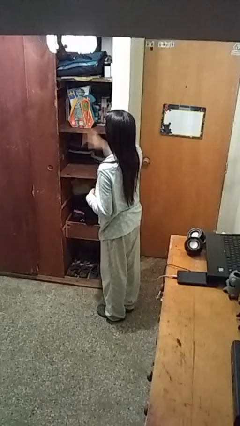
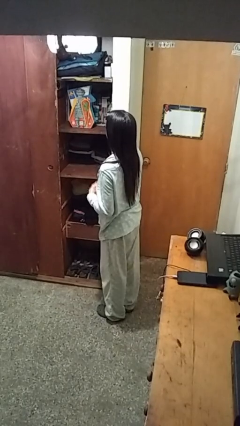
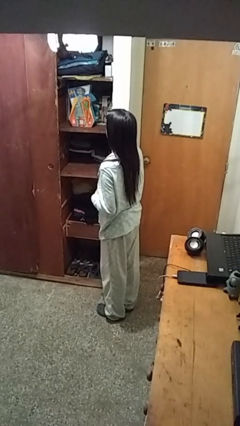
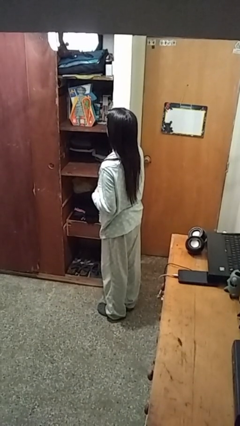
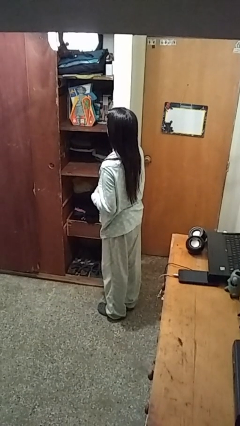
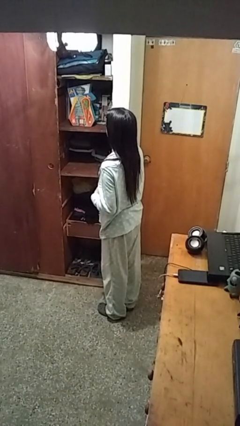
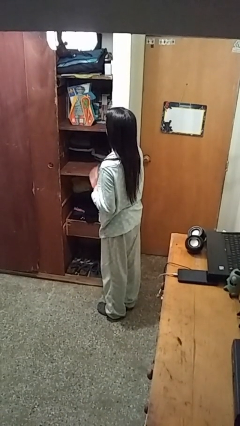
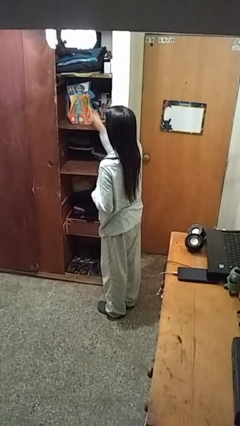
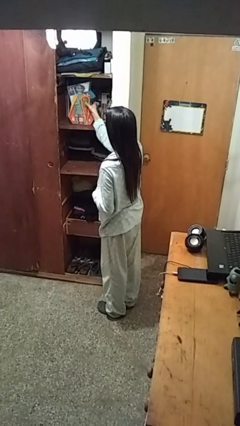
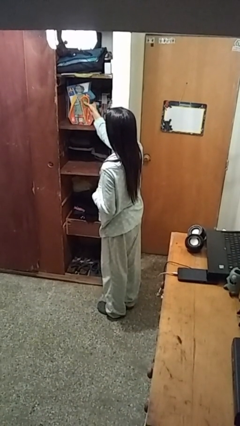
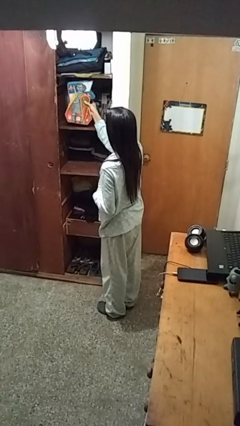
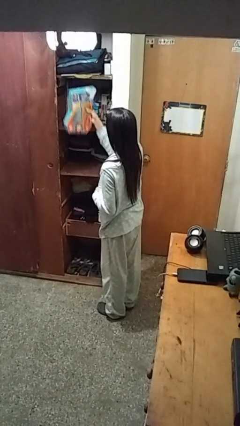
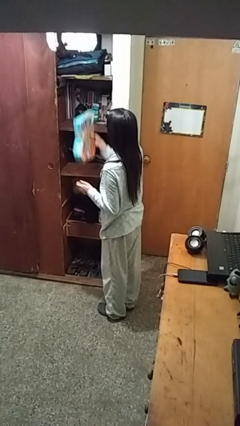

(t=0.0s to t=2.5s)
person puts down object on shelf

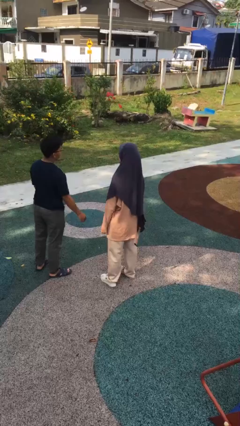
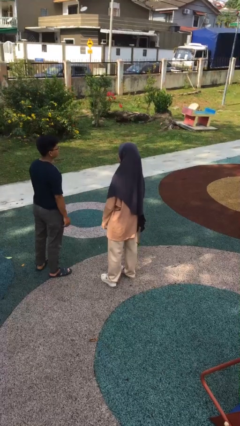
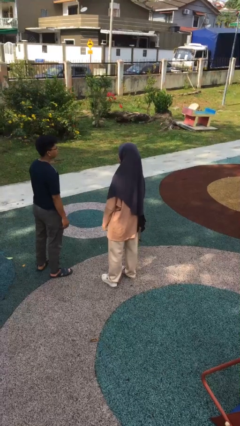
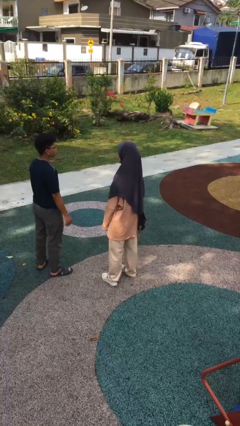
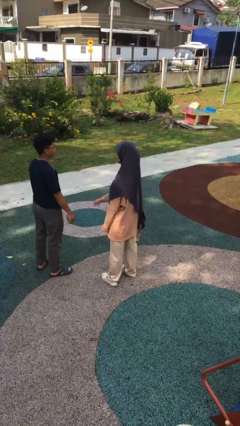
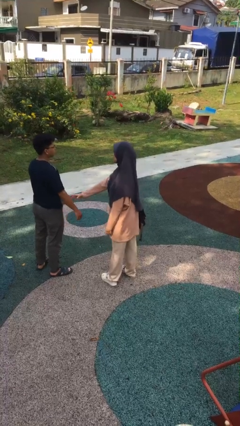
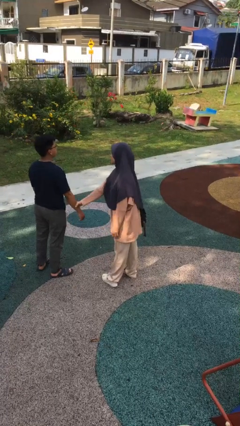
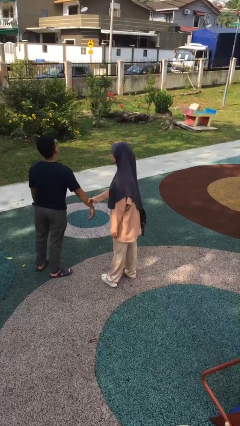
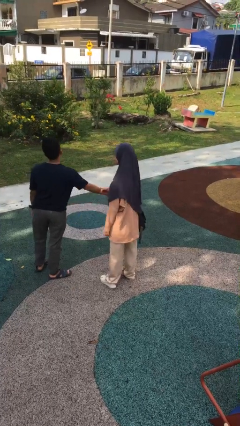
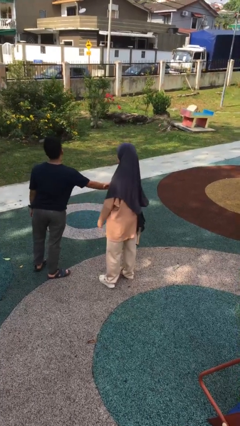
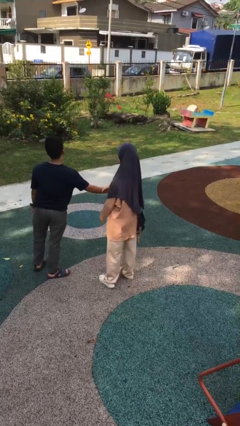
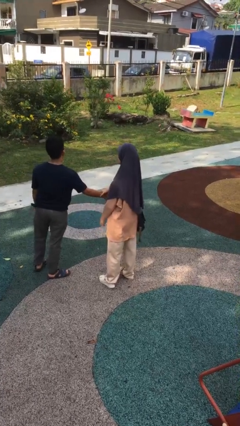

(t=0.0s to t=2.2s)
person grabs person by forearm

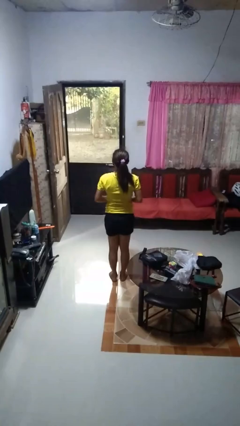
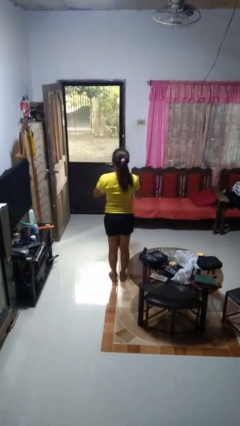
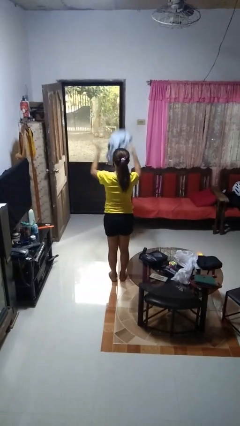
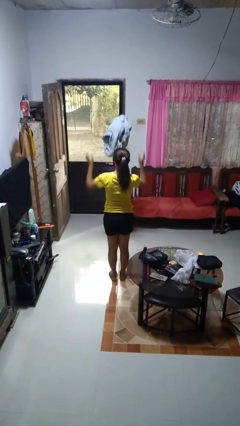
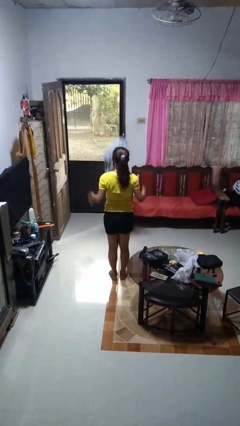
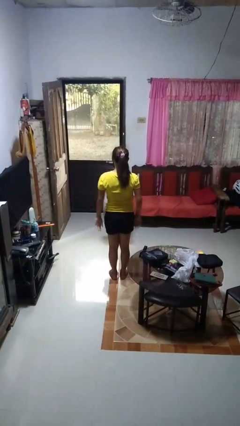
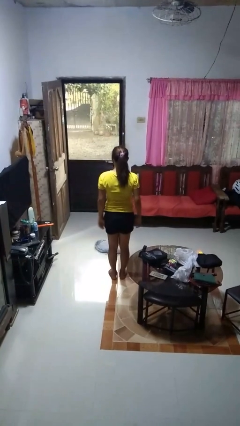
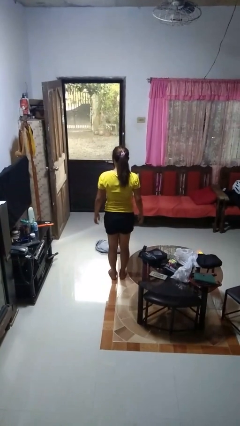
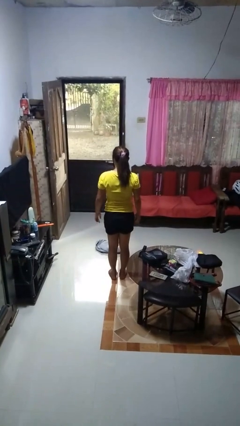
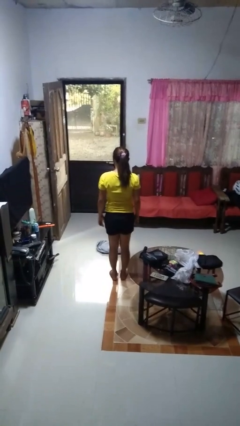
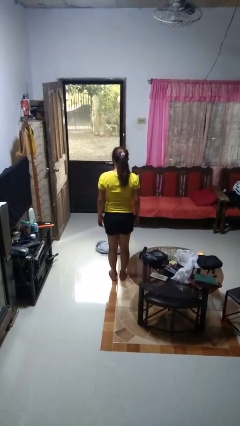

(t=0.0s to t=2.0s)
person throws object into air

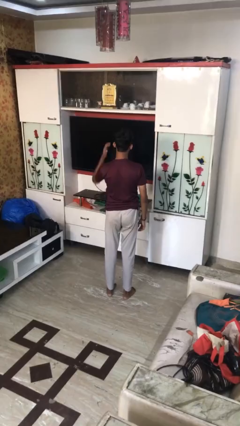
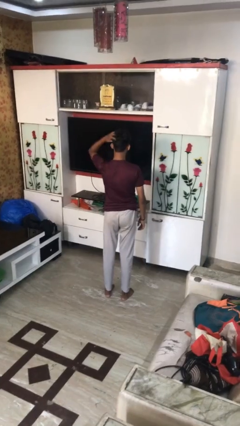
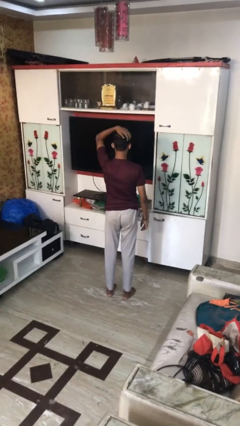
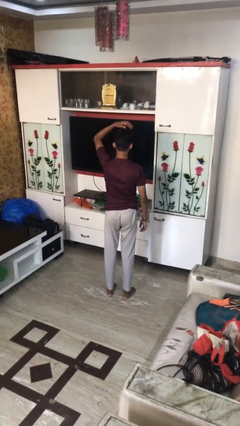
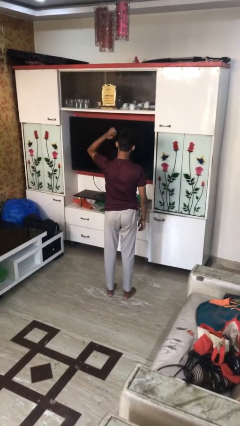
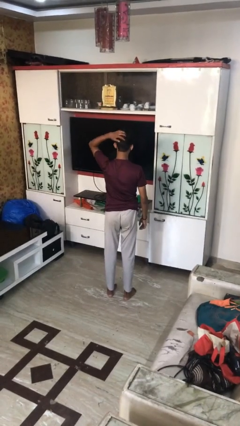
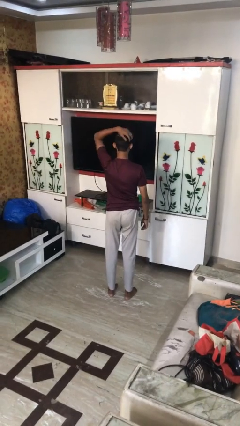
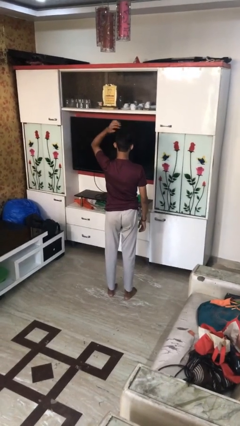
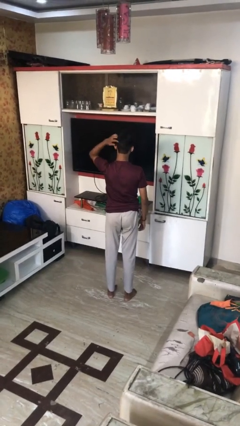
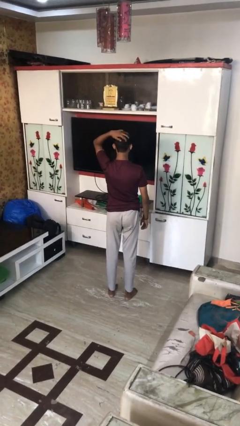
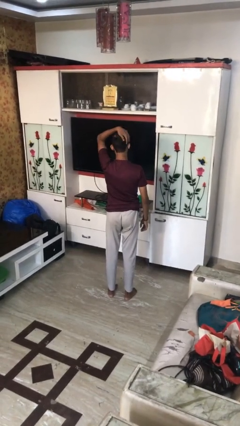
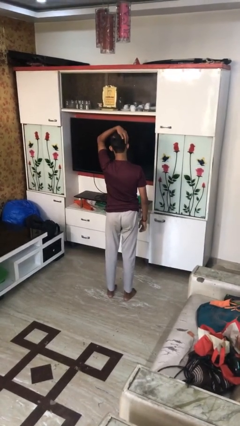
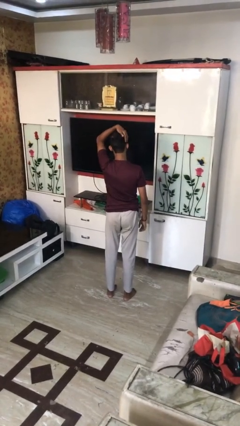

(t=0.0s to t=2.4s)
person strokes hair

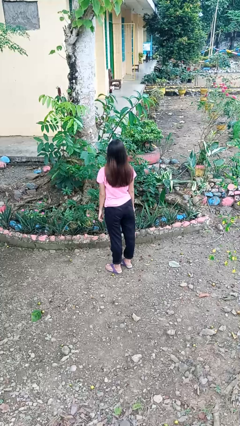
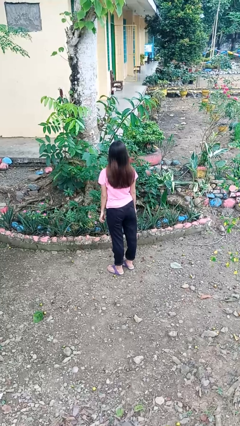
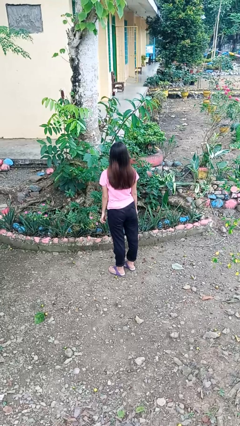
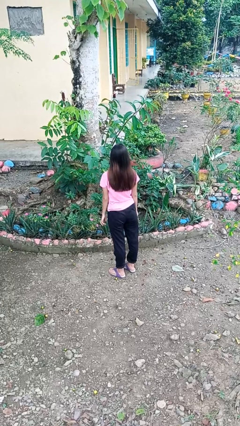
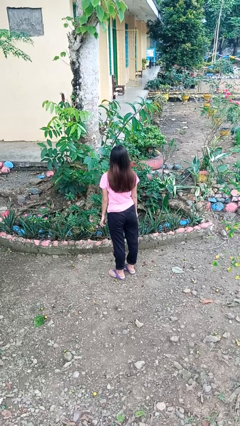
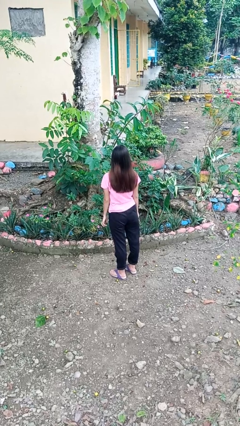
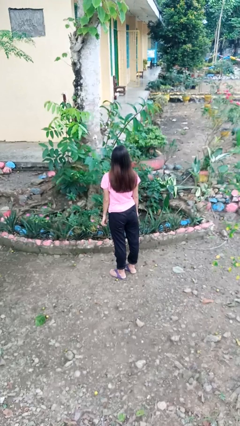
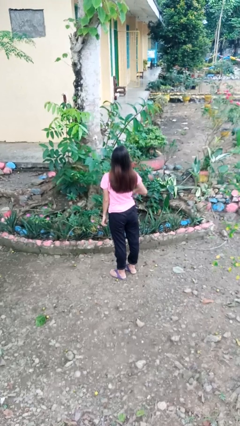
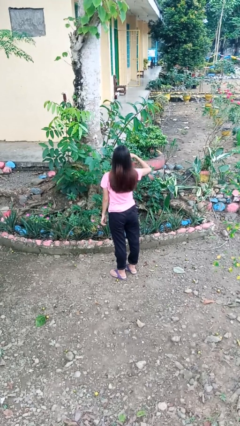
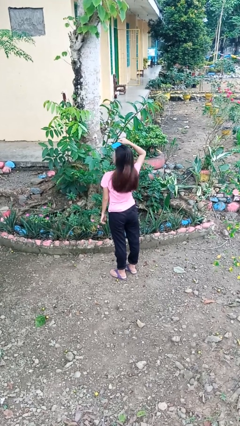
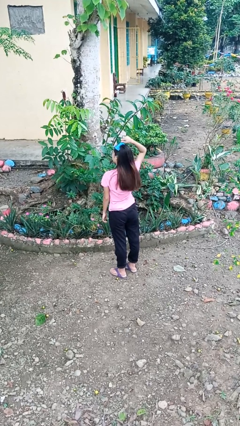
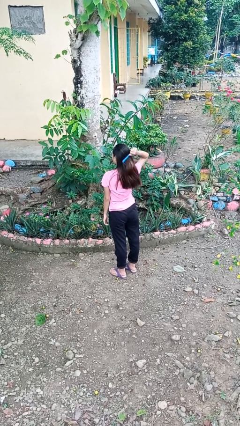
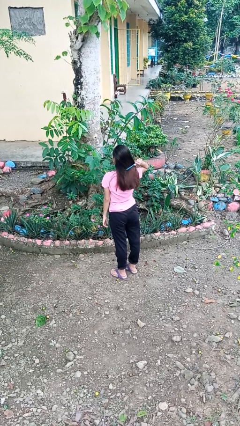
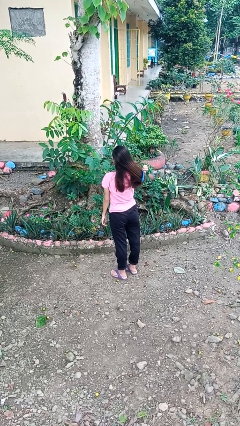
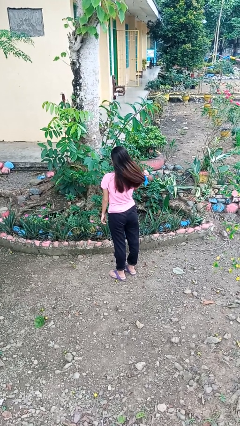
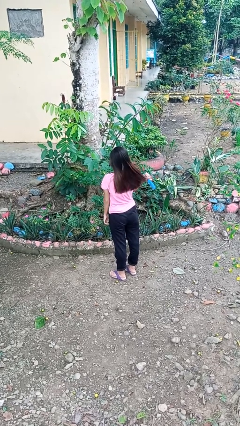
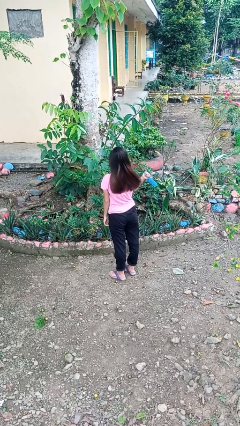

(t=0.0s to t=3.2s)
person brushes hair

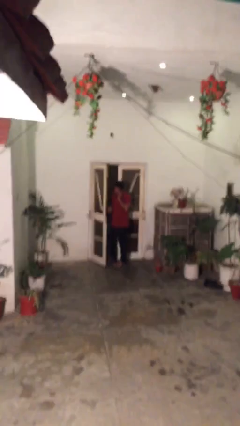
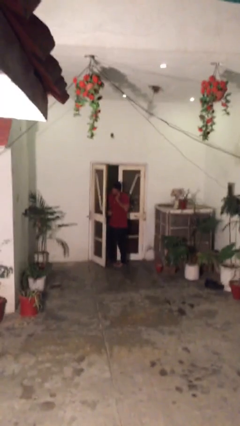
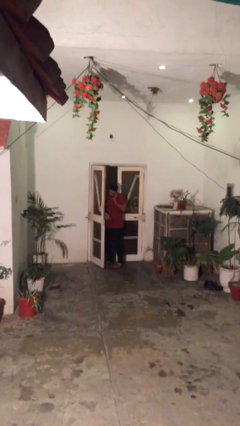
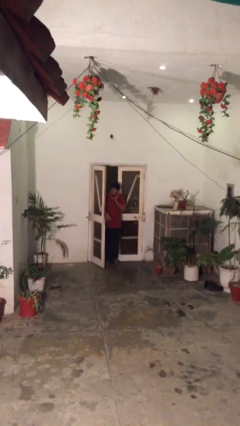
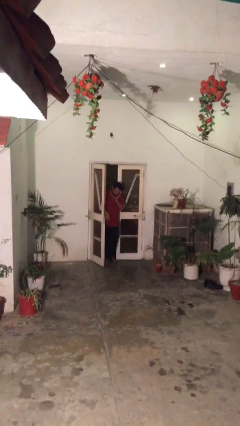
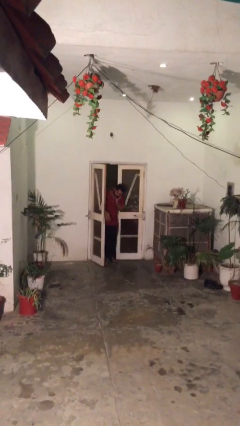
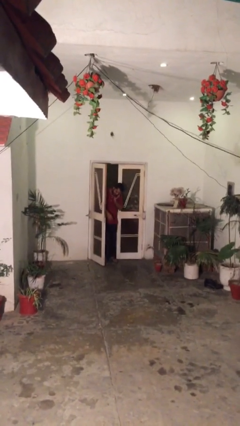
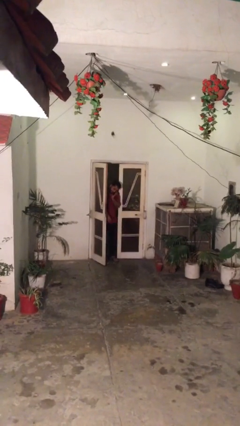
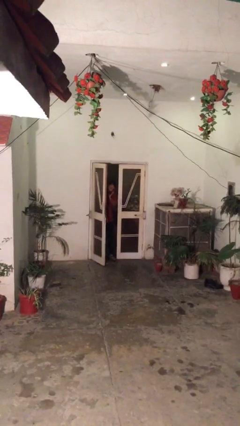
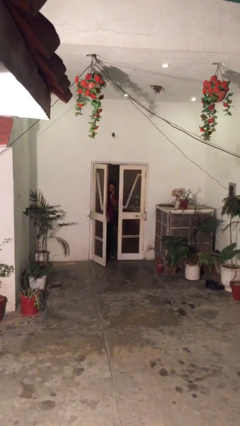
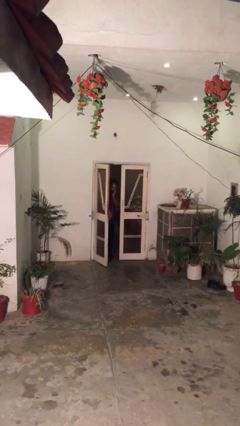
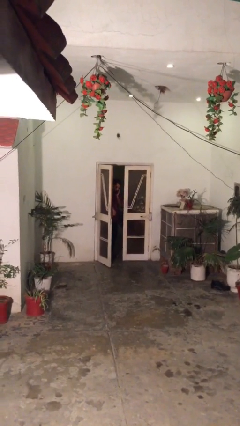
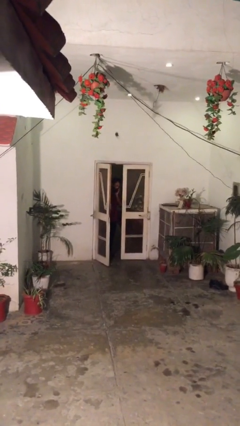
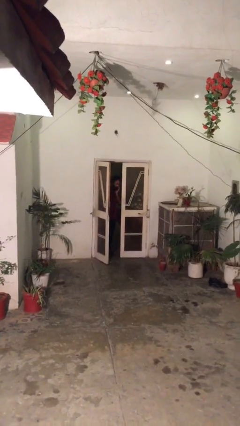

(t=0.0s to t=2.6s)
person exits scene through structure

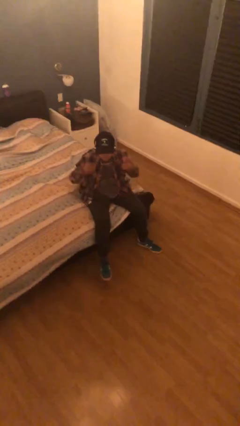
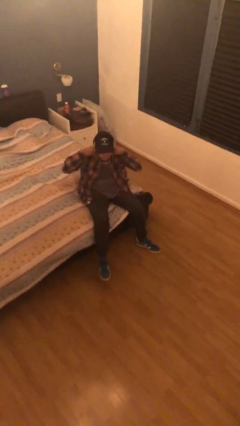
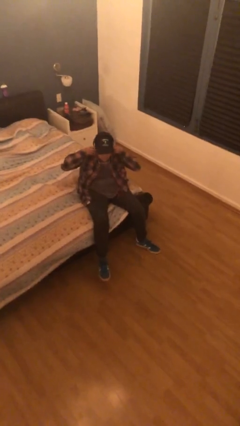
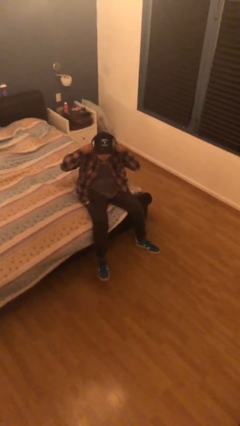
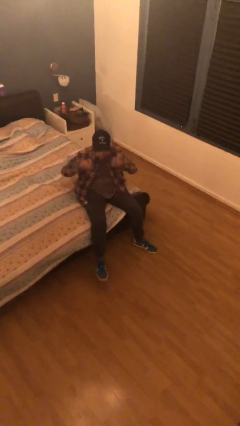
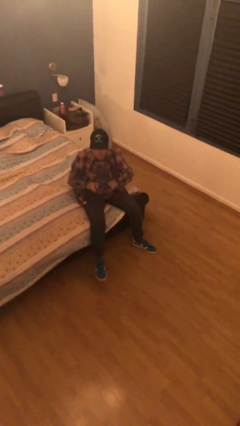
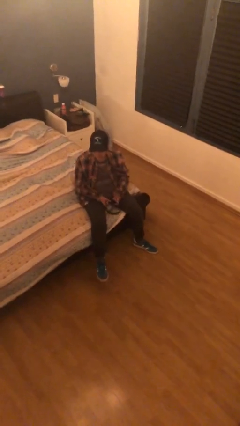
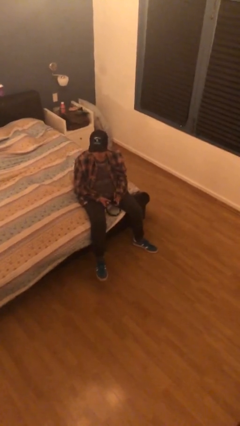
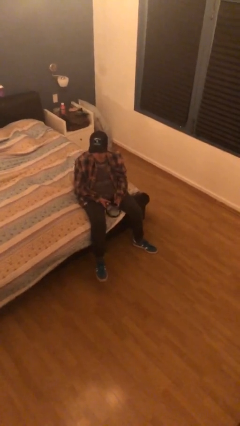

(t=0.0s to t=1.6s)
person takes off headphones

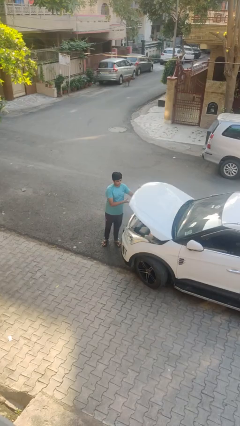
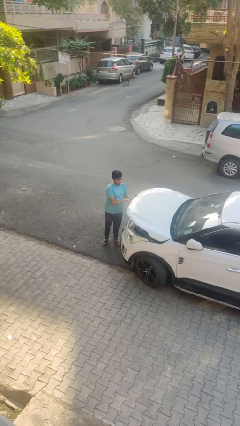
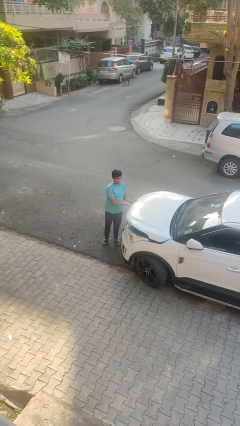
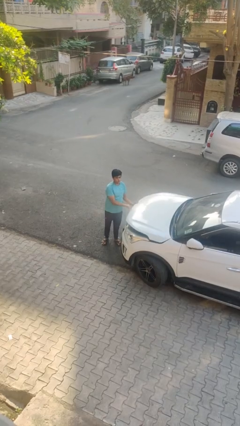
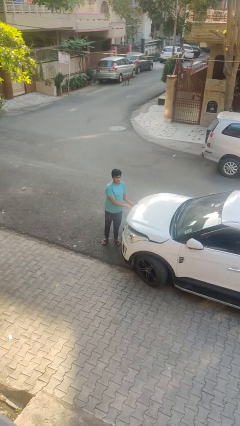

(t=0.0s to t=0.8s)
person closes car hood
